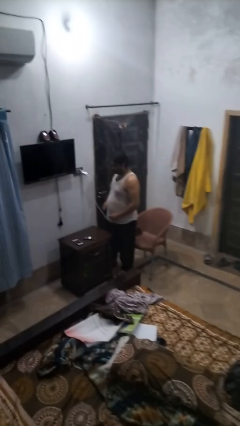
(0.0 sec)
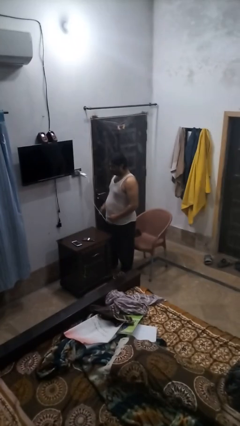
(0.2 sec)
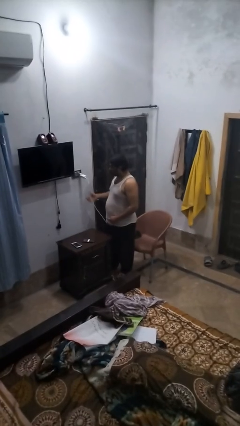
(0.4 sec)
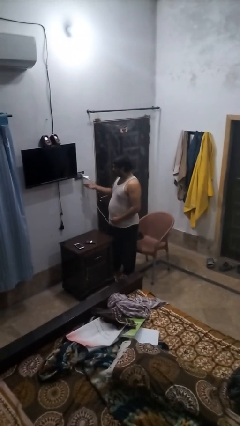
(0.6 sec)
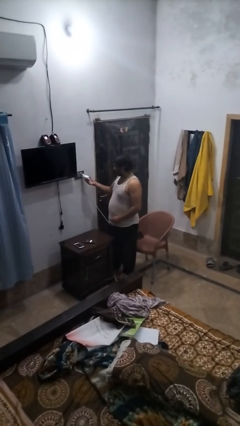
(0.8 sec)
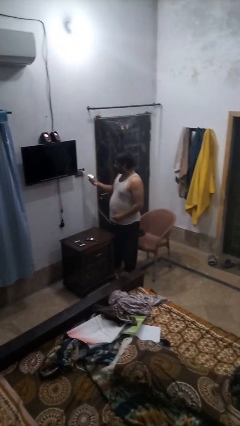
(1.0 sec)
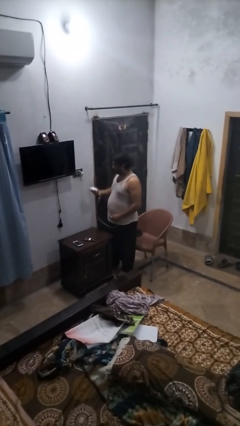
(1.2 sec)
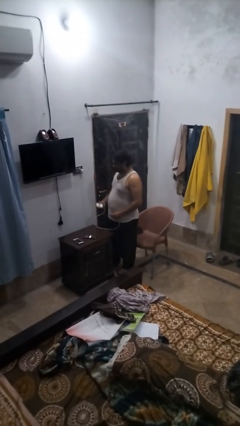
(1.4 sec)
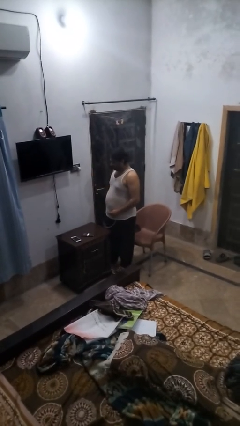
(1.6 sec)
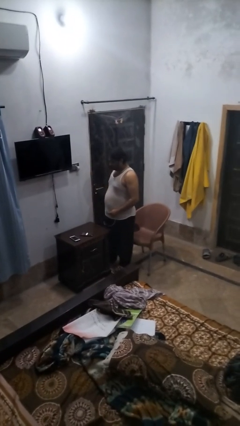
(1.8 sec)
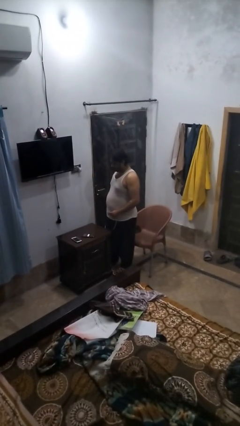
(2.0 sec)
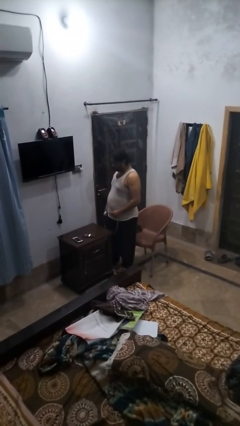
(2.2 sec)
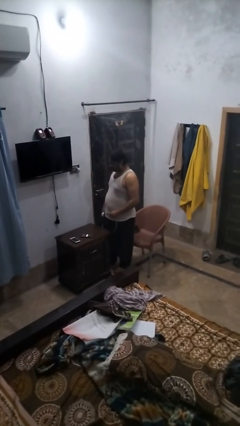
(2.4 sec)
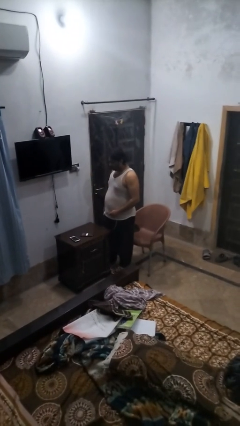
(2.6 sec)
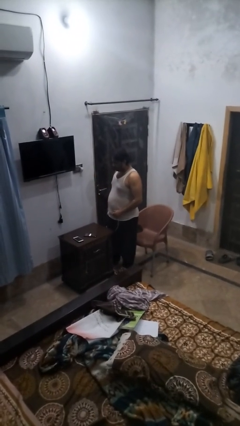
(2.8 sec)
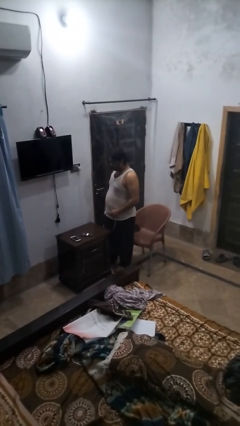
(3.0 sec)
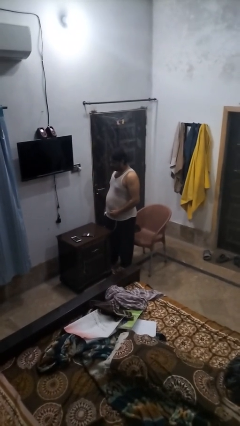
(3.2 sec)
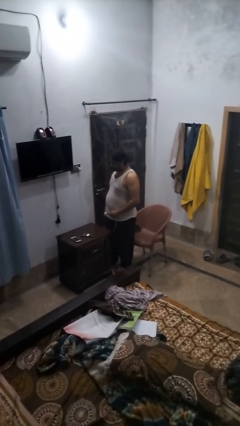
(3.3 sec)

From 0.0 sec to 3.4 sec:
person unplugs from electrical socket

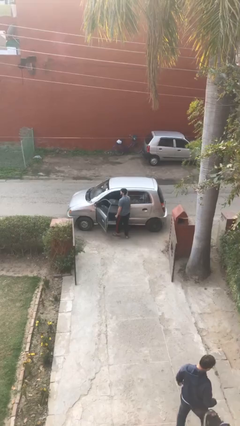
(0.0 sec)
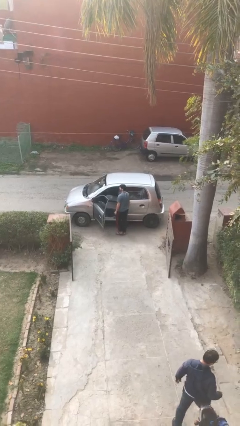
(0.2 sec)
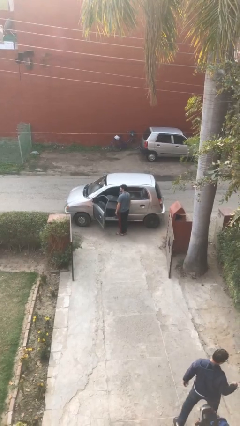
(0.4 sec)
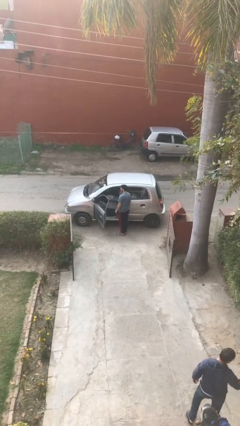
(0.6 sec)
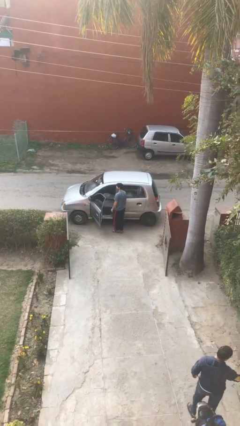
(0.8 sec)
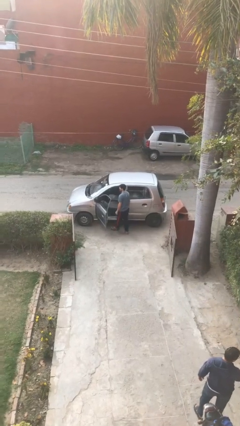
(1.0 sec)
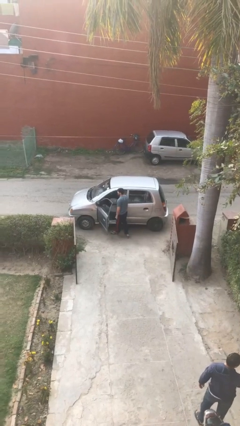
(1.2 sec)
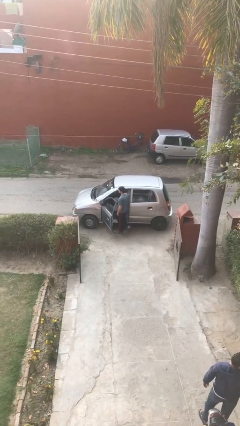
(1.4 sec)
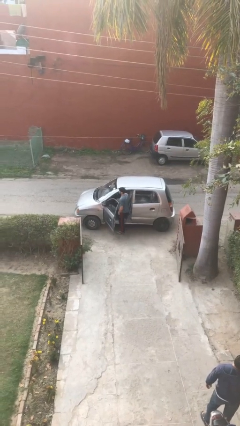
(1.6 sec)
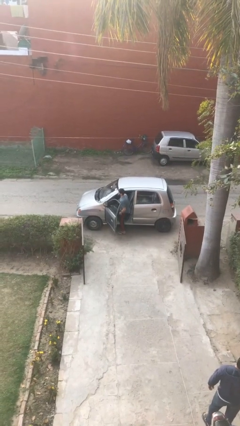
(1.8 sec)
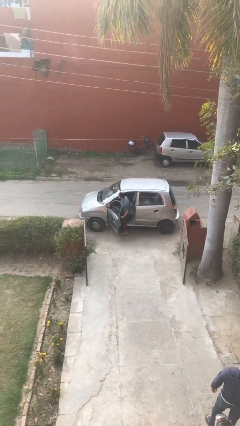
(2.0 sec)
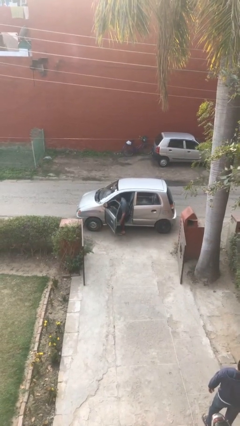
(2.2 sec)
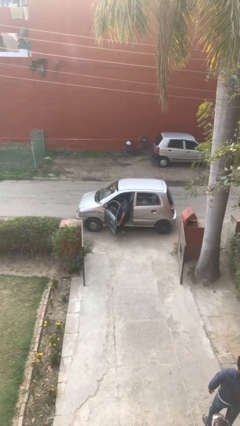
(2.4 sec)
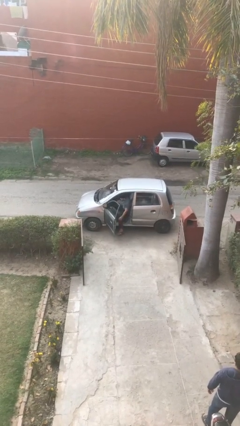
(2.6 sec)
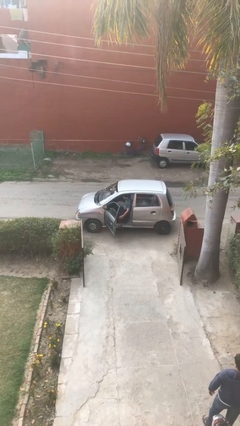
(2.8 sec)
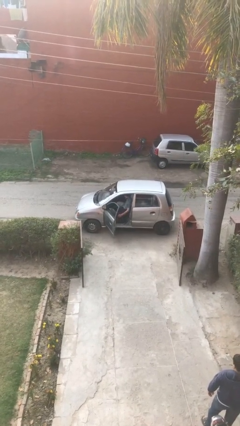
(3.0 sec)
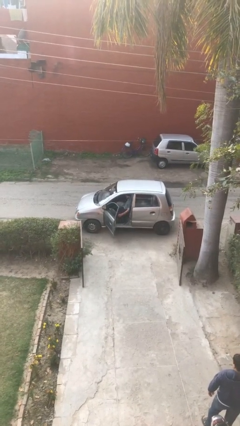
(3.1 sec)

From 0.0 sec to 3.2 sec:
person enters car

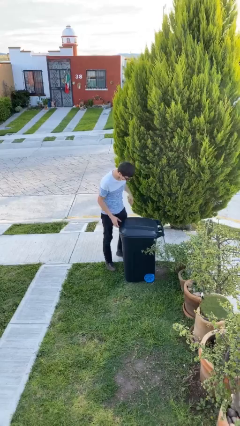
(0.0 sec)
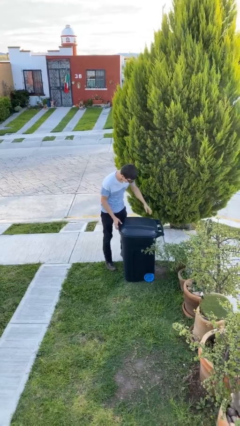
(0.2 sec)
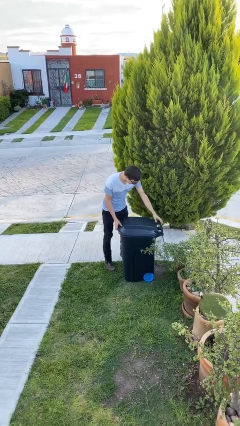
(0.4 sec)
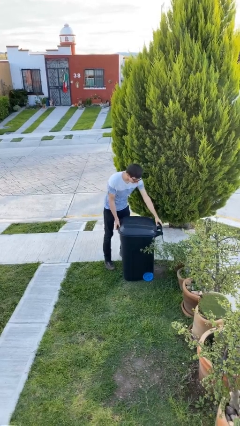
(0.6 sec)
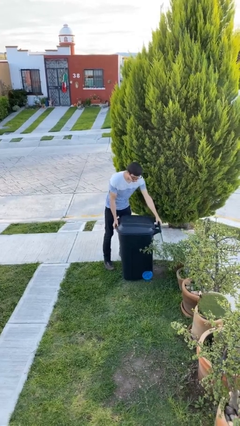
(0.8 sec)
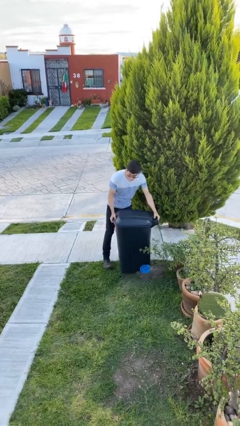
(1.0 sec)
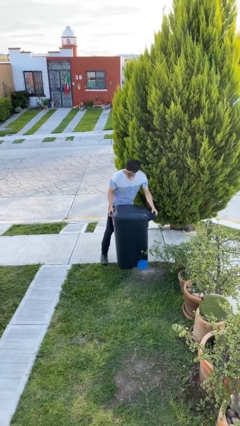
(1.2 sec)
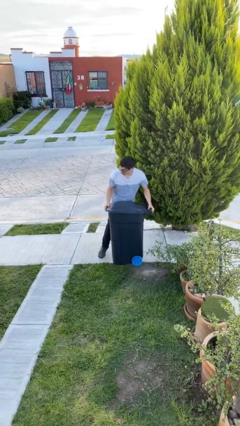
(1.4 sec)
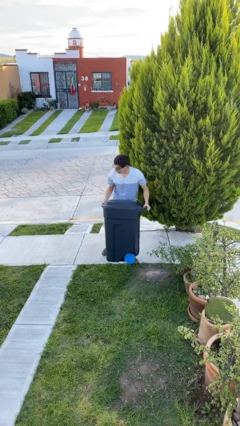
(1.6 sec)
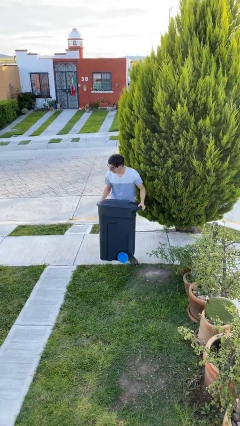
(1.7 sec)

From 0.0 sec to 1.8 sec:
person picks up object from floor

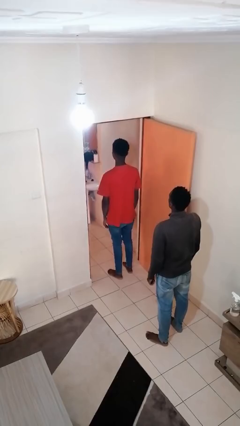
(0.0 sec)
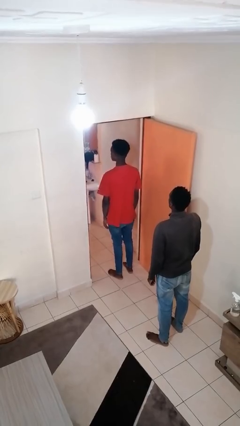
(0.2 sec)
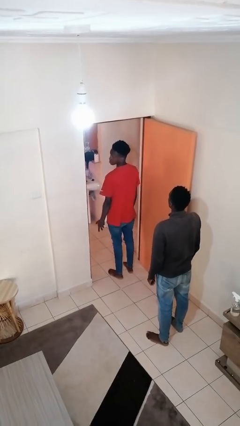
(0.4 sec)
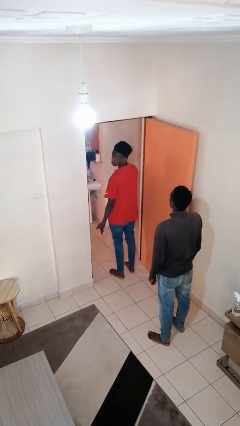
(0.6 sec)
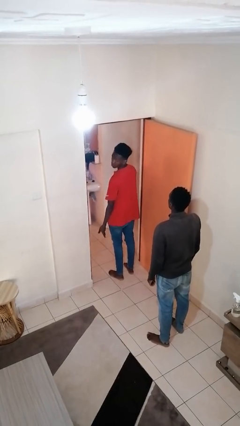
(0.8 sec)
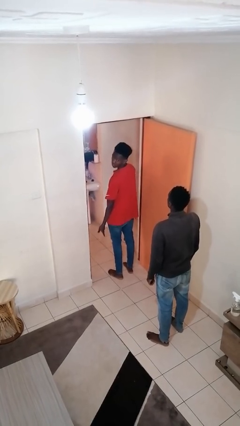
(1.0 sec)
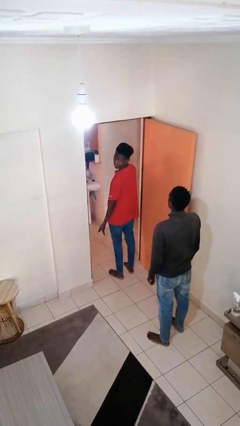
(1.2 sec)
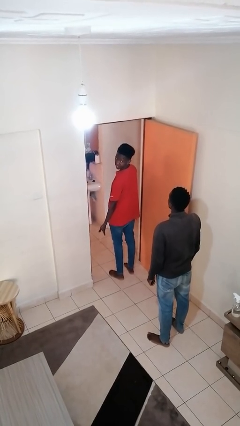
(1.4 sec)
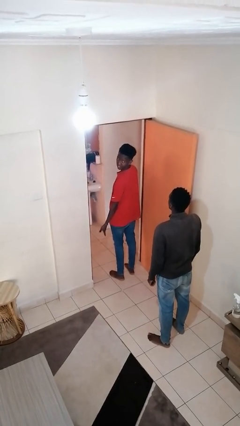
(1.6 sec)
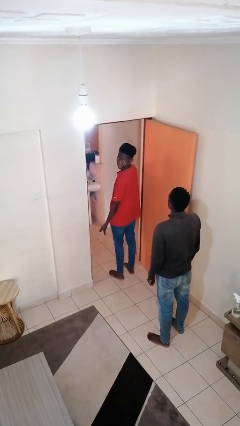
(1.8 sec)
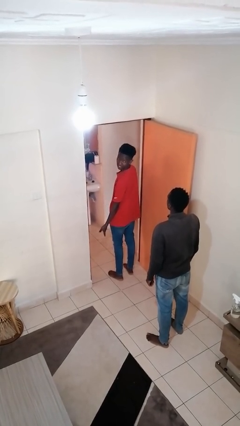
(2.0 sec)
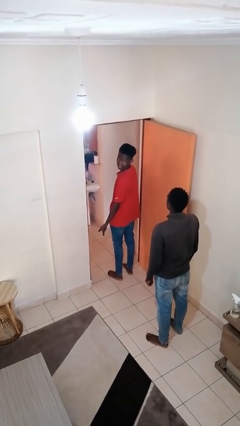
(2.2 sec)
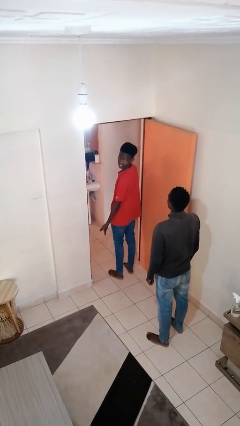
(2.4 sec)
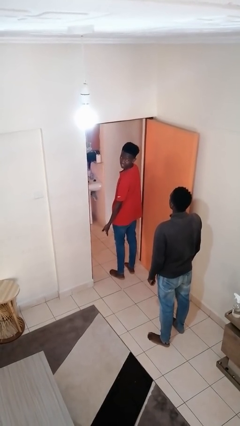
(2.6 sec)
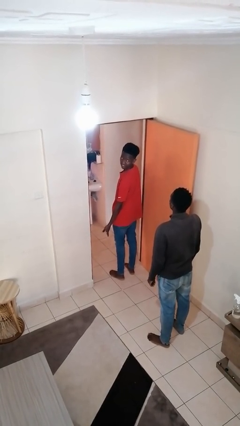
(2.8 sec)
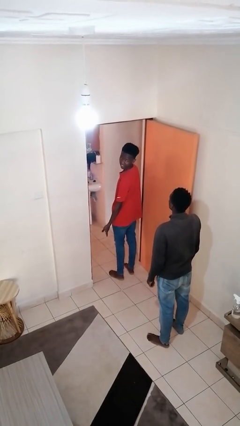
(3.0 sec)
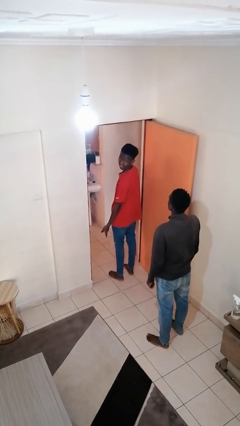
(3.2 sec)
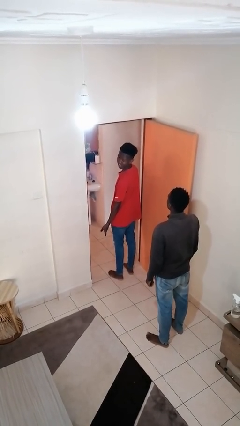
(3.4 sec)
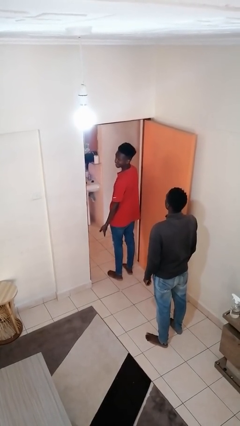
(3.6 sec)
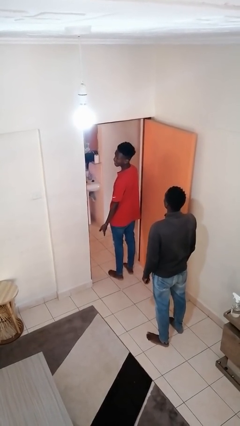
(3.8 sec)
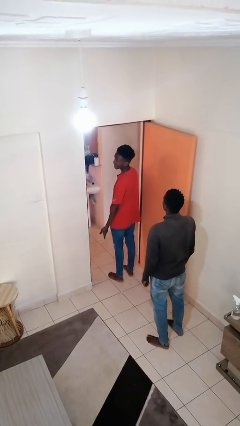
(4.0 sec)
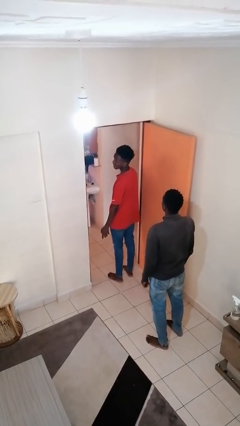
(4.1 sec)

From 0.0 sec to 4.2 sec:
person looks over shoulder

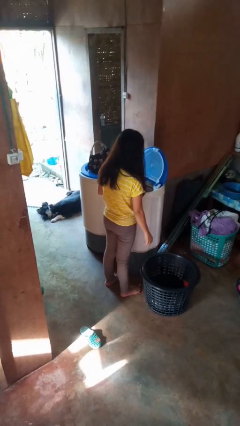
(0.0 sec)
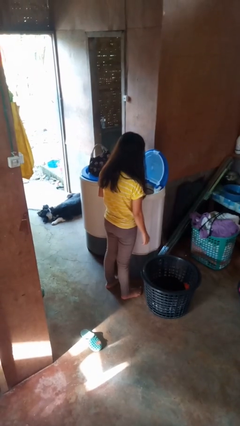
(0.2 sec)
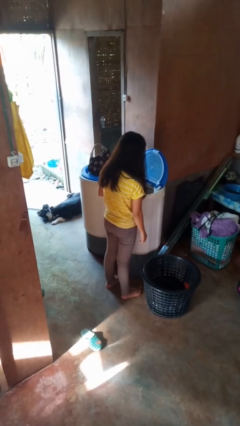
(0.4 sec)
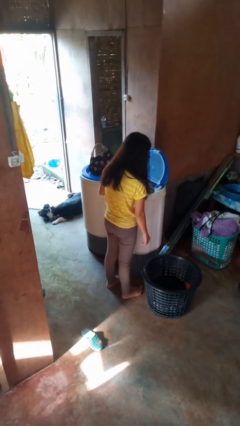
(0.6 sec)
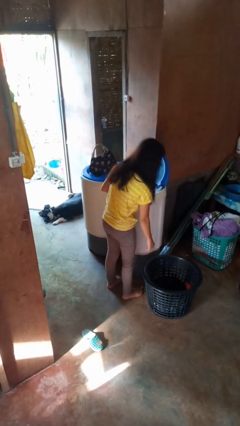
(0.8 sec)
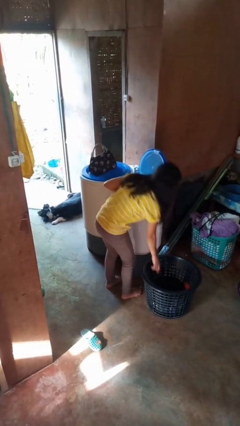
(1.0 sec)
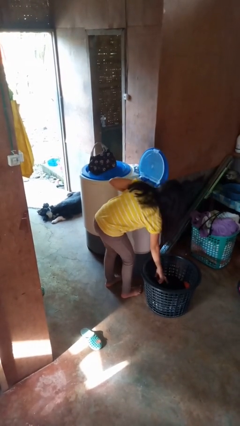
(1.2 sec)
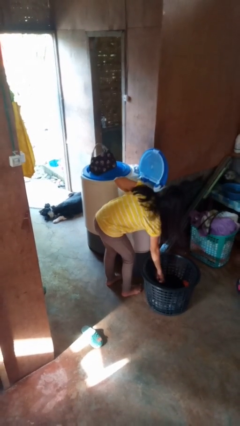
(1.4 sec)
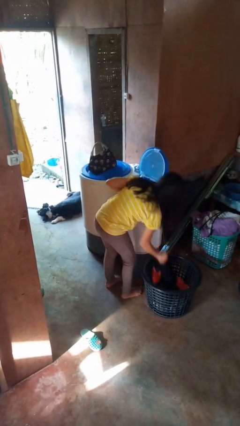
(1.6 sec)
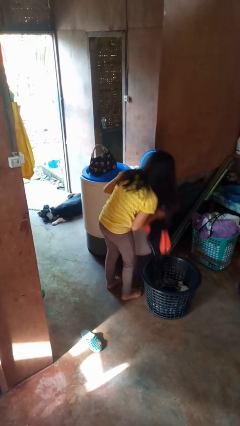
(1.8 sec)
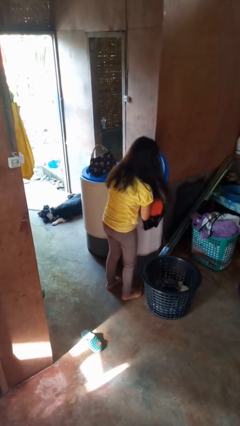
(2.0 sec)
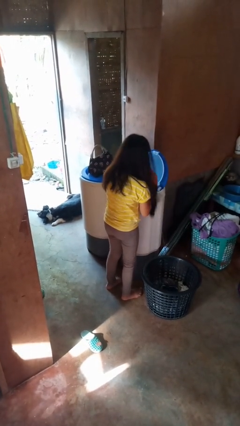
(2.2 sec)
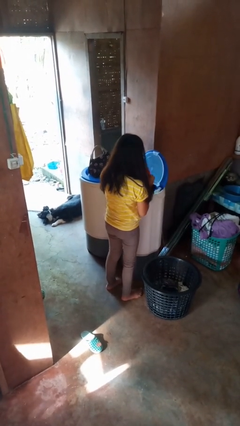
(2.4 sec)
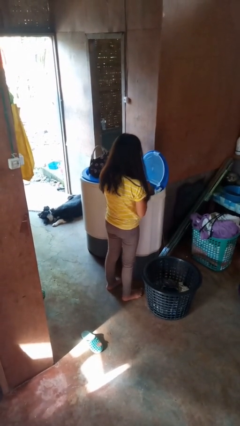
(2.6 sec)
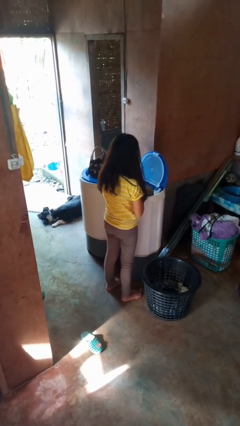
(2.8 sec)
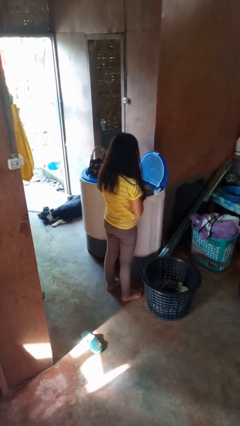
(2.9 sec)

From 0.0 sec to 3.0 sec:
person loads clotheswasher

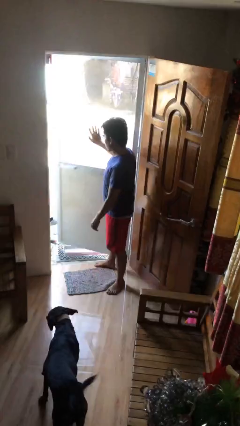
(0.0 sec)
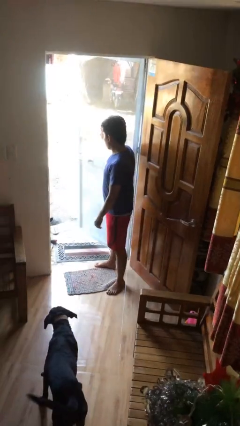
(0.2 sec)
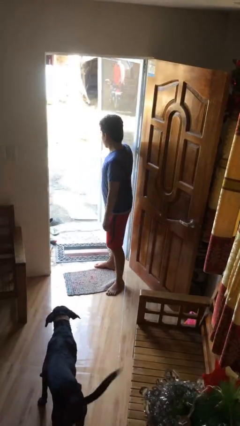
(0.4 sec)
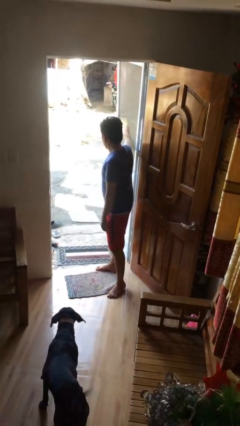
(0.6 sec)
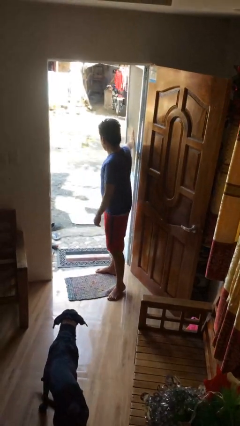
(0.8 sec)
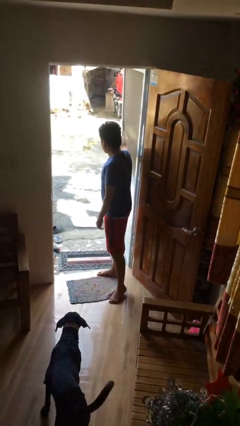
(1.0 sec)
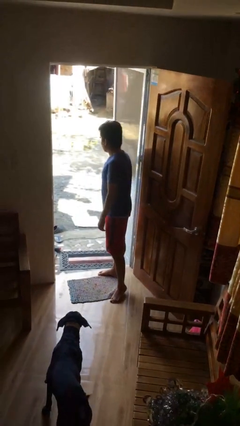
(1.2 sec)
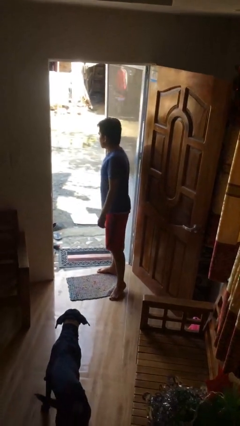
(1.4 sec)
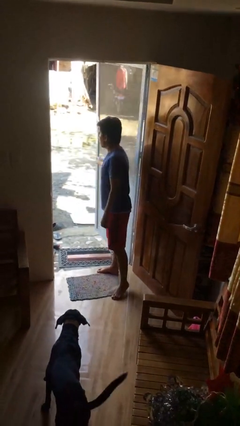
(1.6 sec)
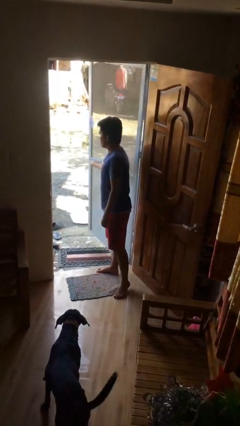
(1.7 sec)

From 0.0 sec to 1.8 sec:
person opens facility door
